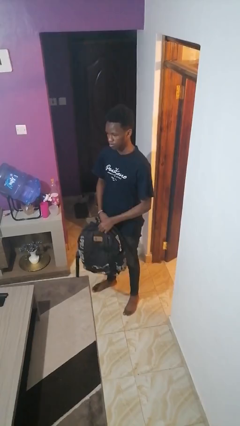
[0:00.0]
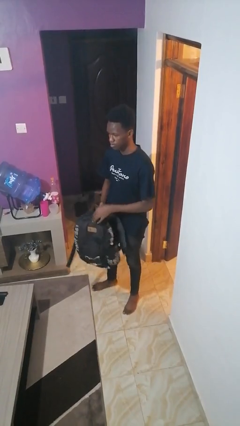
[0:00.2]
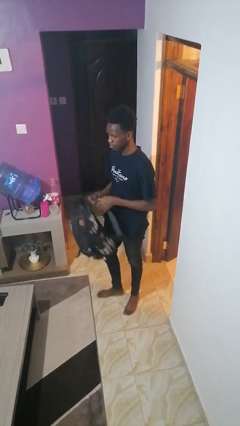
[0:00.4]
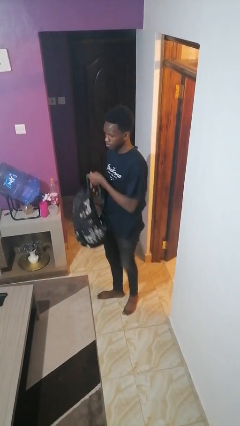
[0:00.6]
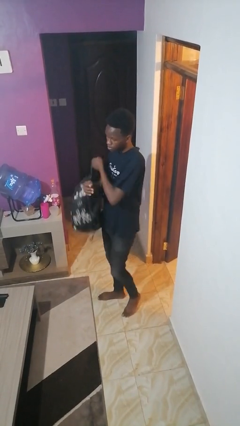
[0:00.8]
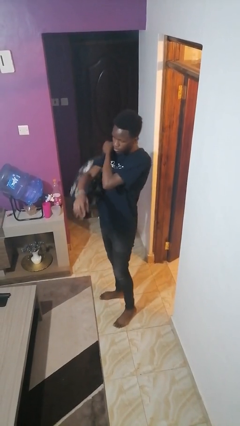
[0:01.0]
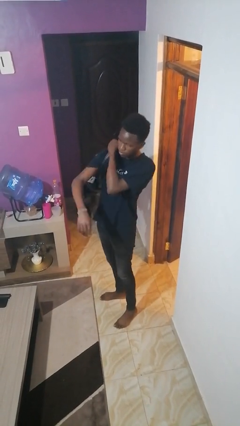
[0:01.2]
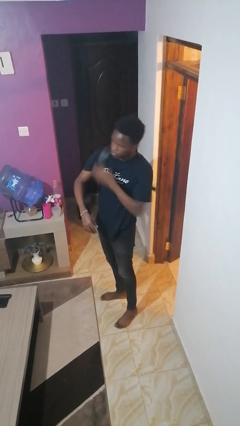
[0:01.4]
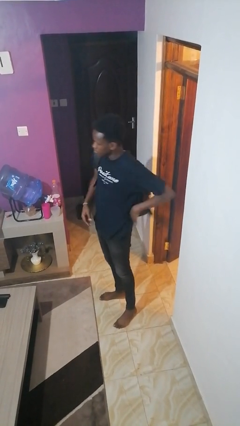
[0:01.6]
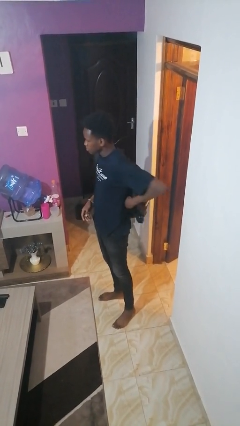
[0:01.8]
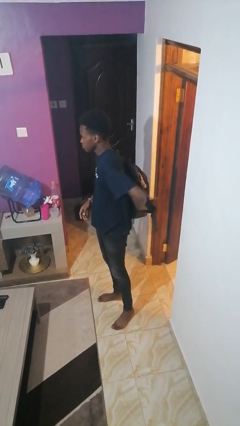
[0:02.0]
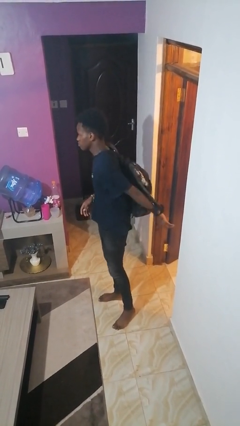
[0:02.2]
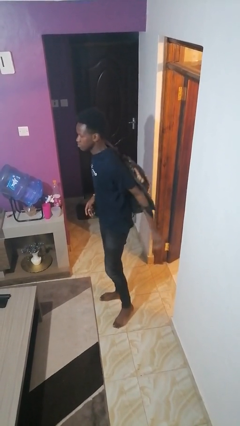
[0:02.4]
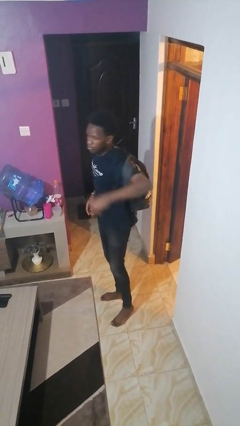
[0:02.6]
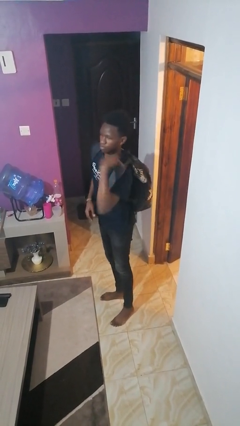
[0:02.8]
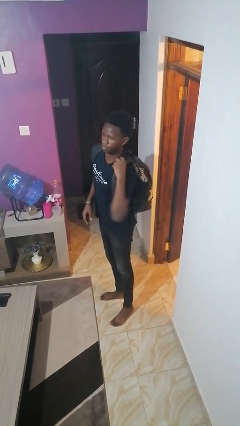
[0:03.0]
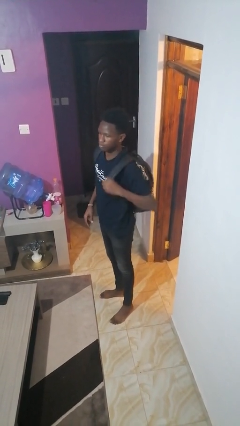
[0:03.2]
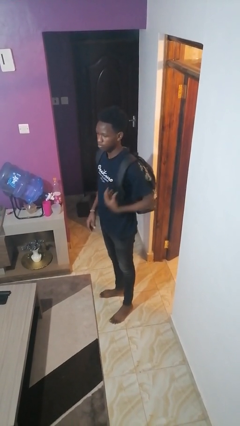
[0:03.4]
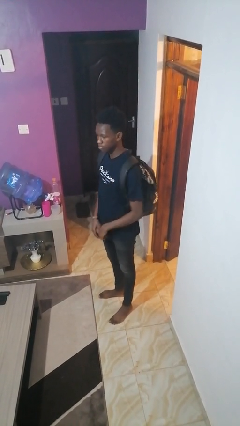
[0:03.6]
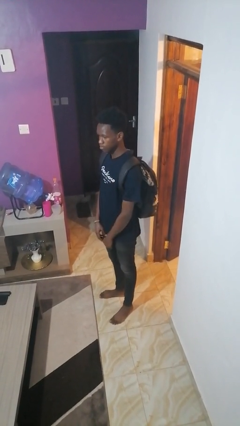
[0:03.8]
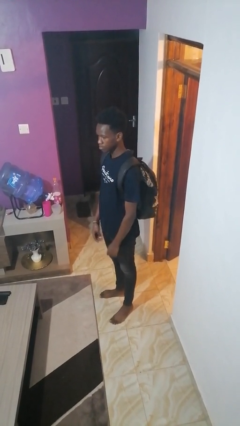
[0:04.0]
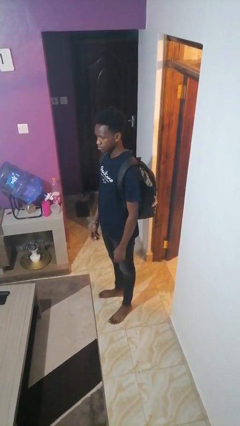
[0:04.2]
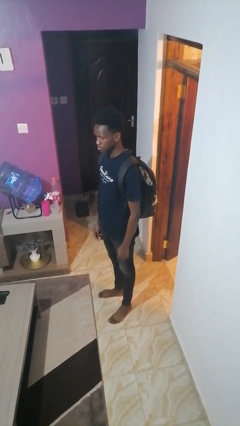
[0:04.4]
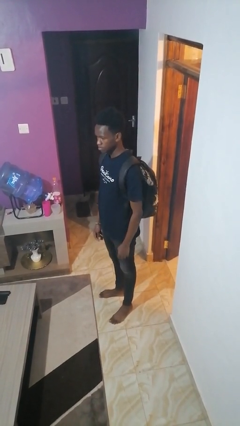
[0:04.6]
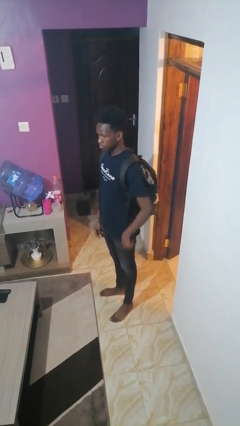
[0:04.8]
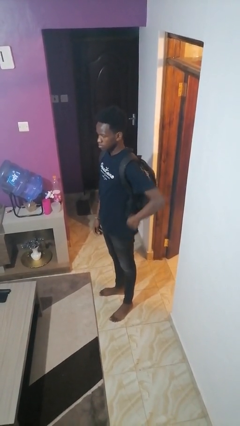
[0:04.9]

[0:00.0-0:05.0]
person puts on backpack

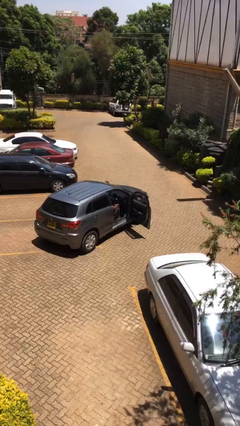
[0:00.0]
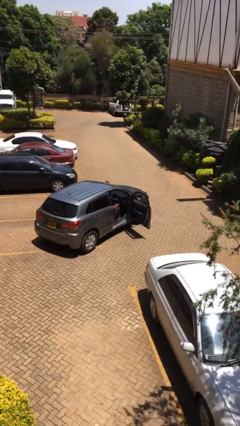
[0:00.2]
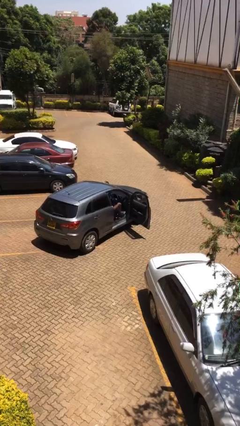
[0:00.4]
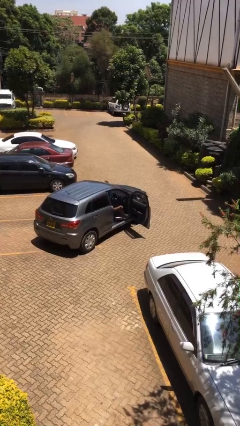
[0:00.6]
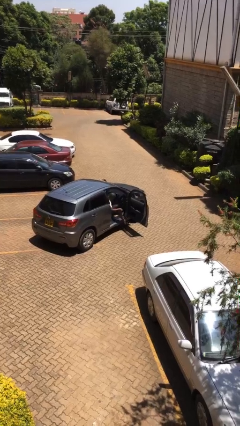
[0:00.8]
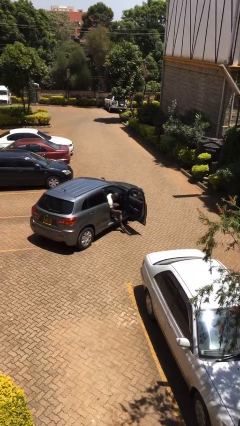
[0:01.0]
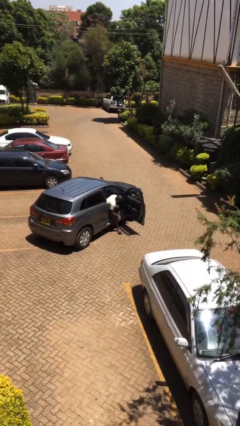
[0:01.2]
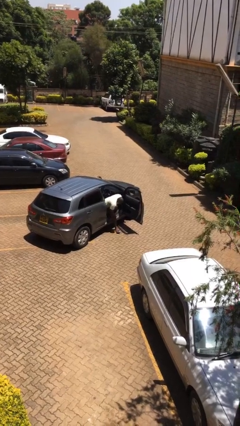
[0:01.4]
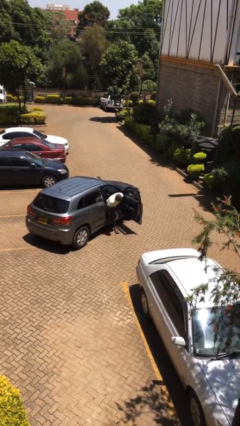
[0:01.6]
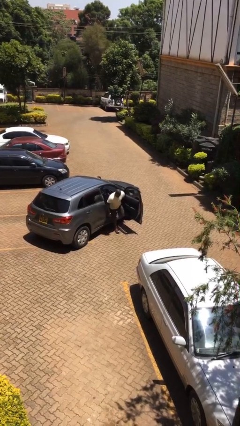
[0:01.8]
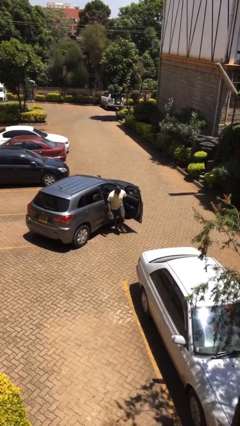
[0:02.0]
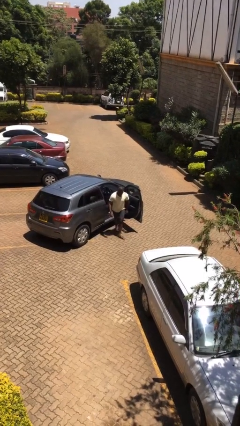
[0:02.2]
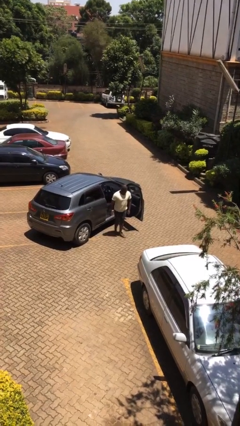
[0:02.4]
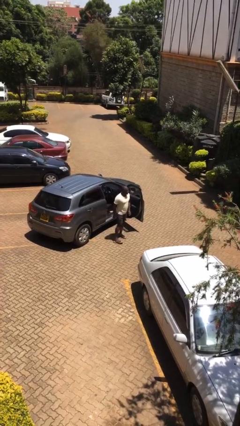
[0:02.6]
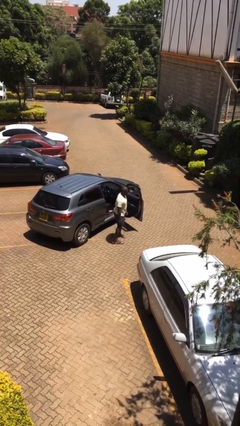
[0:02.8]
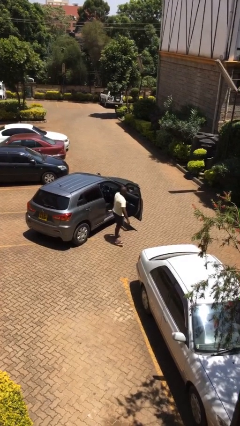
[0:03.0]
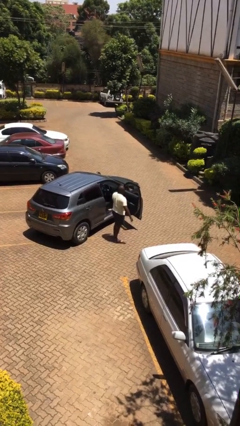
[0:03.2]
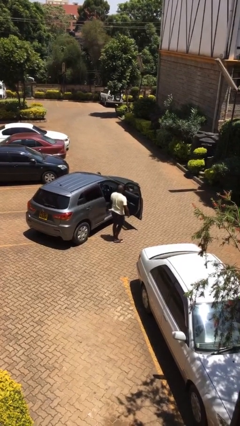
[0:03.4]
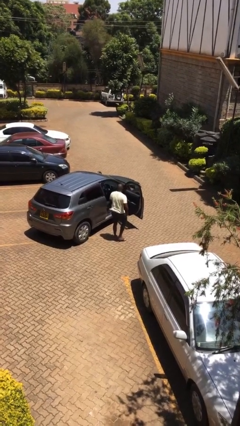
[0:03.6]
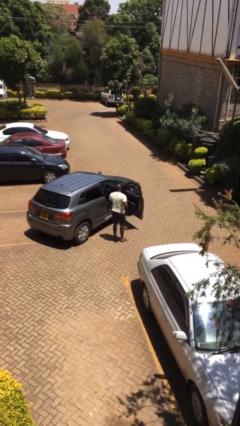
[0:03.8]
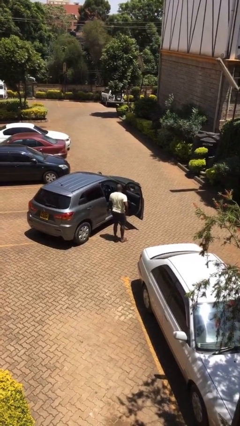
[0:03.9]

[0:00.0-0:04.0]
person exits car

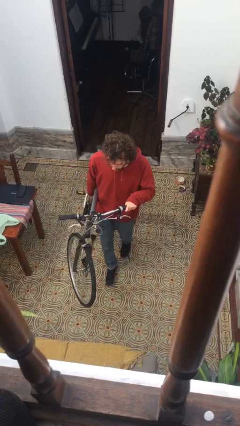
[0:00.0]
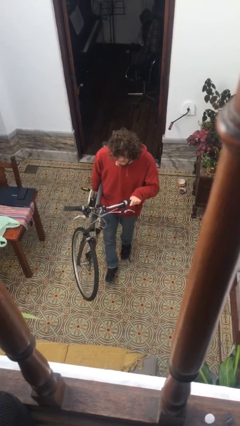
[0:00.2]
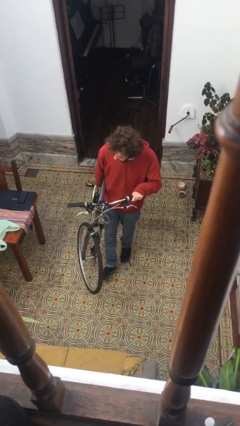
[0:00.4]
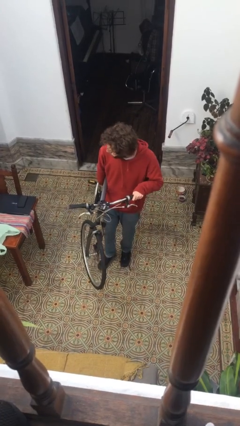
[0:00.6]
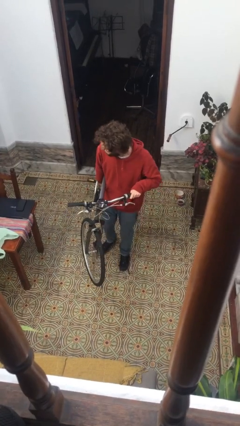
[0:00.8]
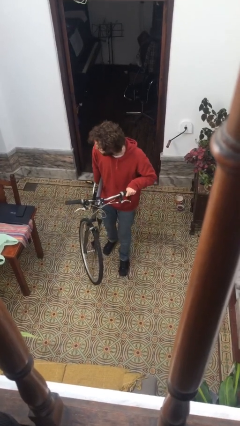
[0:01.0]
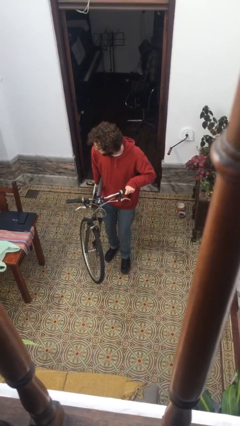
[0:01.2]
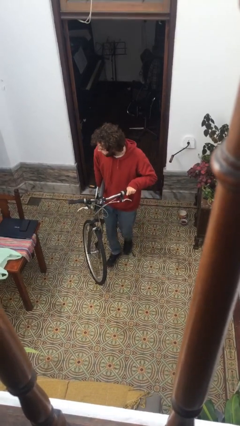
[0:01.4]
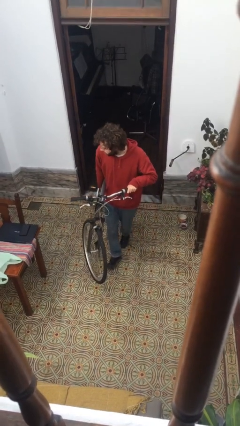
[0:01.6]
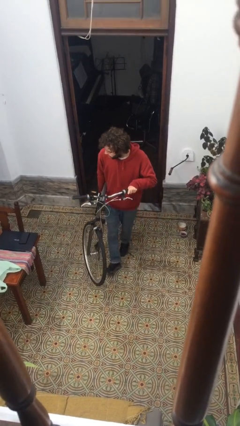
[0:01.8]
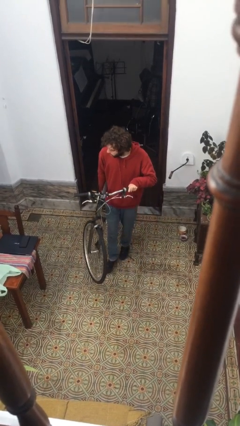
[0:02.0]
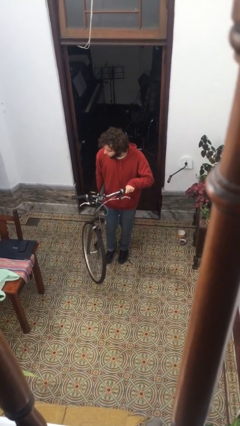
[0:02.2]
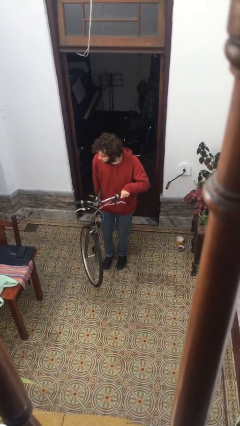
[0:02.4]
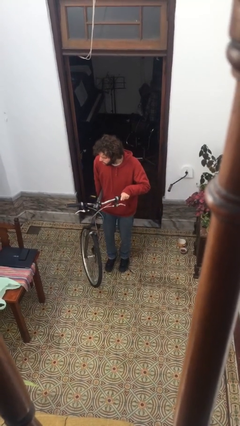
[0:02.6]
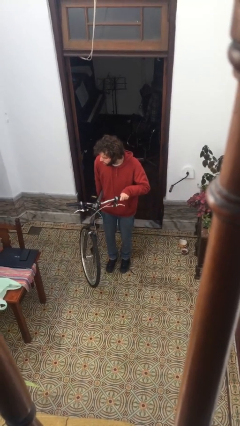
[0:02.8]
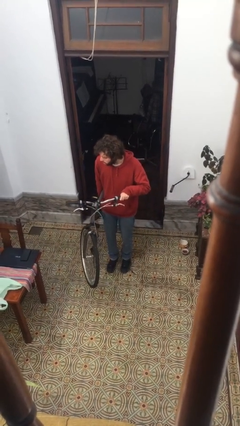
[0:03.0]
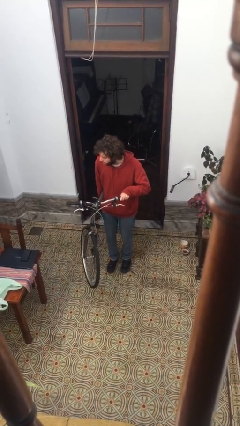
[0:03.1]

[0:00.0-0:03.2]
person carries bicycle

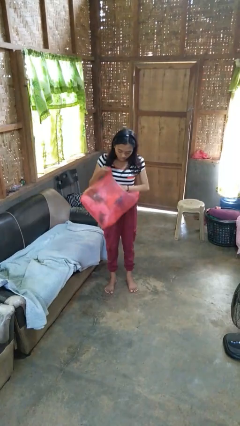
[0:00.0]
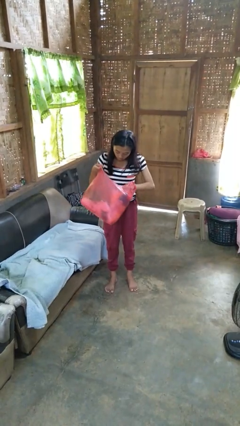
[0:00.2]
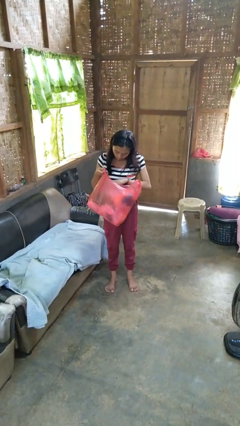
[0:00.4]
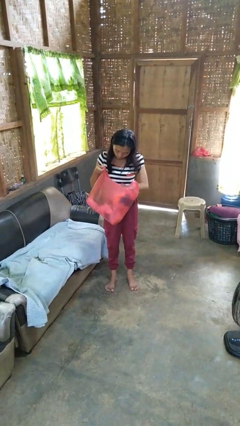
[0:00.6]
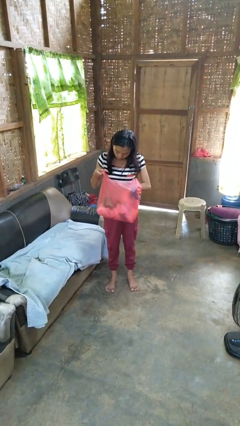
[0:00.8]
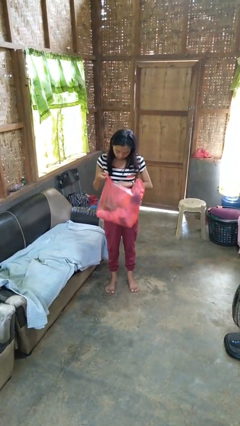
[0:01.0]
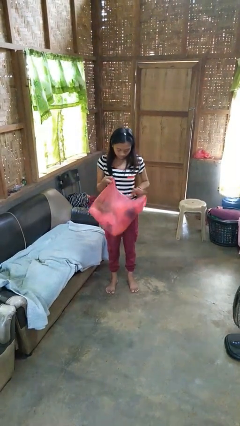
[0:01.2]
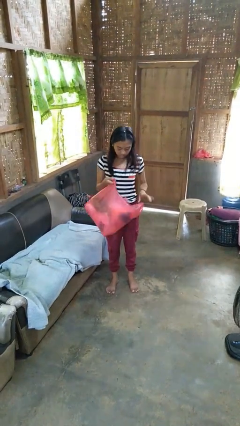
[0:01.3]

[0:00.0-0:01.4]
person searches in bag

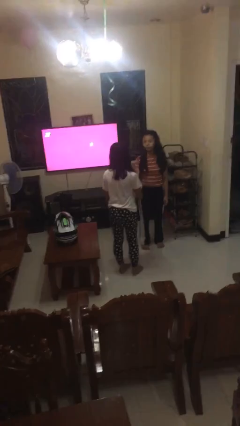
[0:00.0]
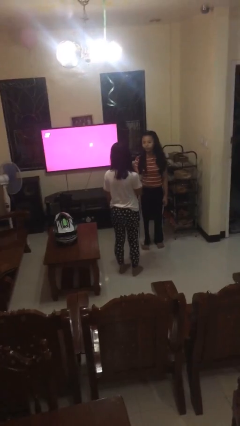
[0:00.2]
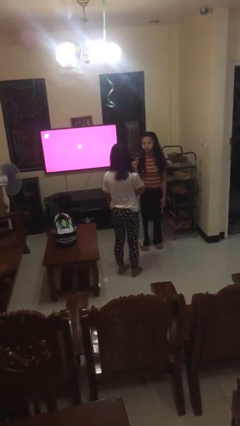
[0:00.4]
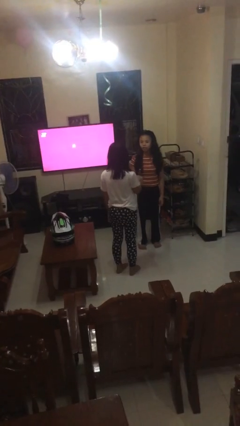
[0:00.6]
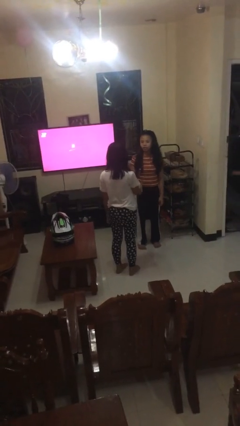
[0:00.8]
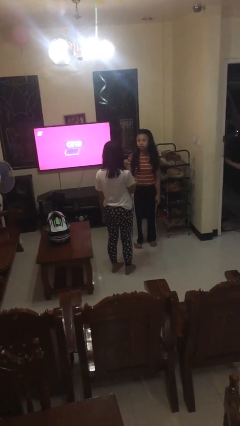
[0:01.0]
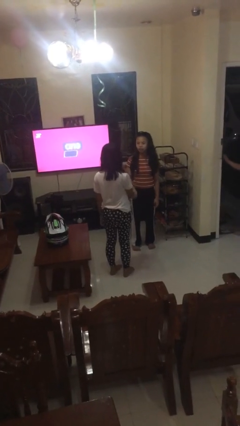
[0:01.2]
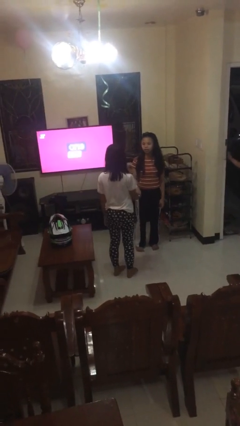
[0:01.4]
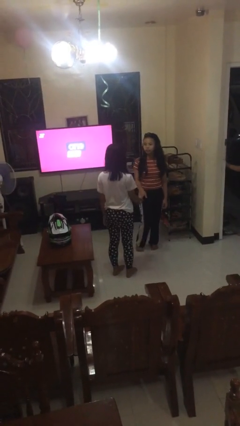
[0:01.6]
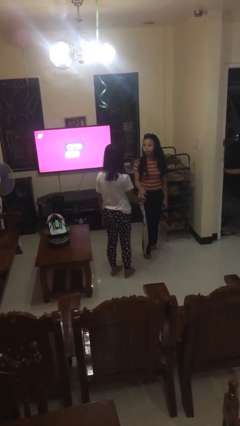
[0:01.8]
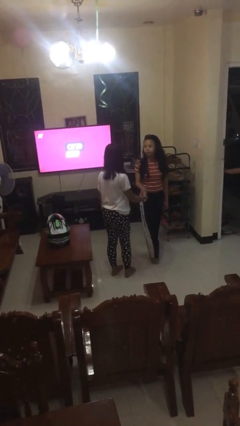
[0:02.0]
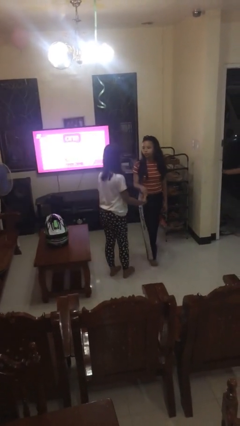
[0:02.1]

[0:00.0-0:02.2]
person shakes hand

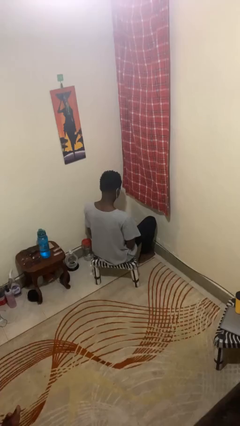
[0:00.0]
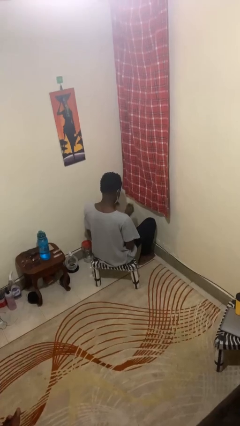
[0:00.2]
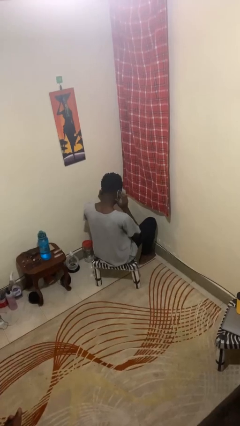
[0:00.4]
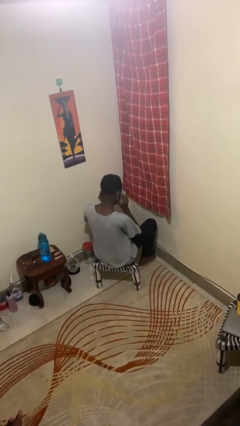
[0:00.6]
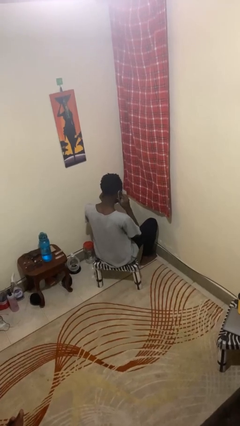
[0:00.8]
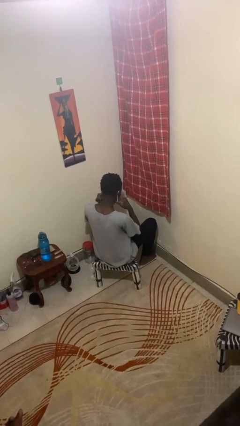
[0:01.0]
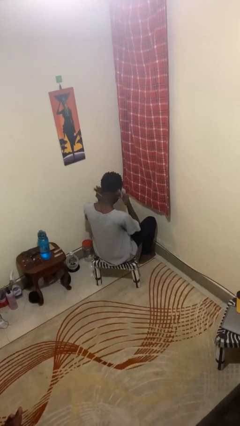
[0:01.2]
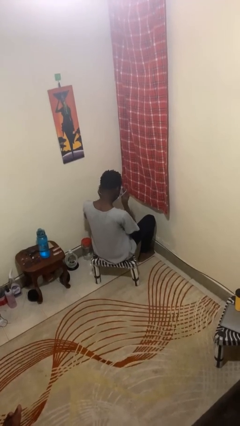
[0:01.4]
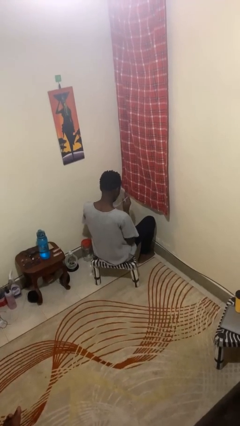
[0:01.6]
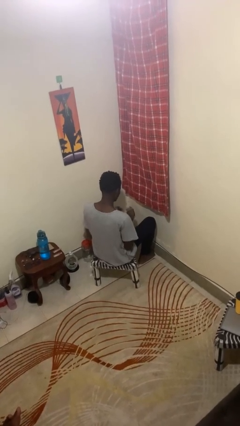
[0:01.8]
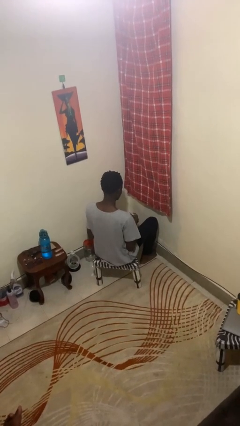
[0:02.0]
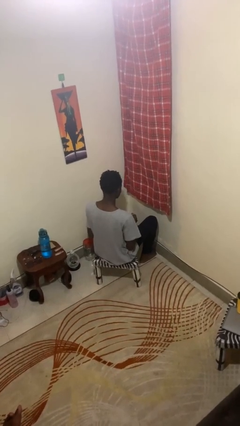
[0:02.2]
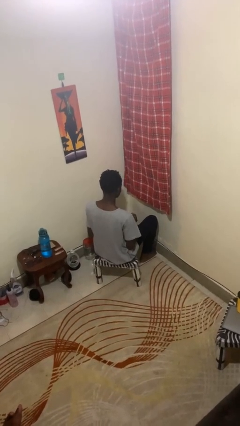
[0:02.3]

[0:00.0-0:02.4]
person takes off facemask
